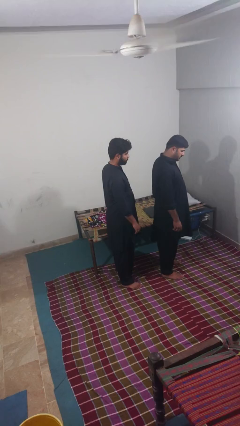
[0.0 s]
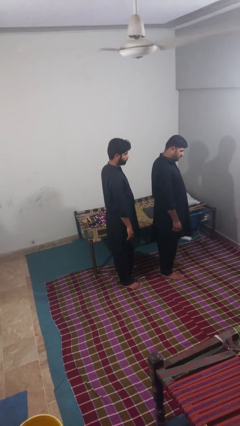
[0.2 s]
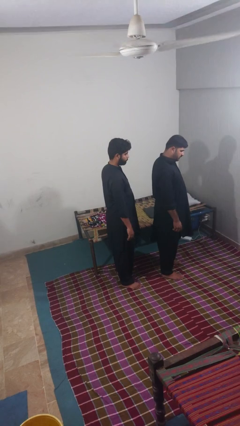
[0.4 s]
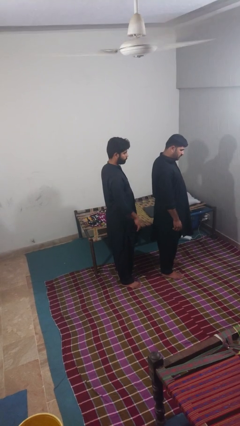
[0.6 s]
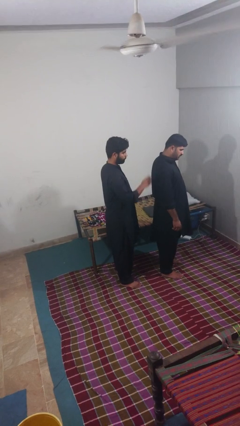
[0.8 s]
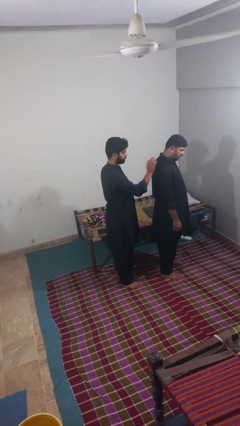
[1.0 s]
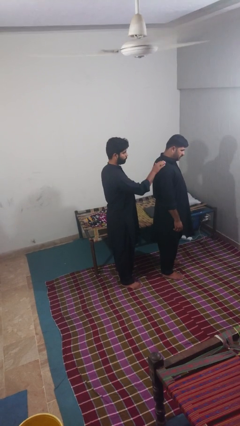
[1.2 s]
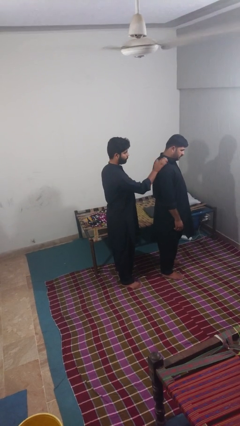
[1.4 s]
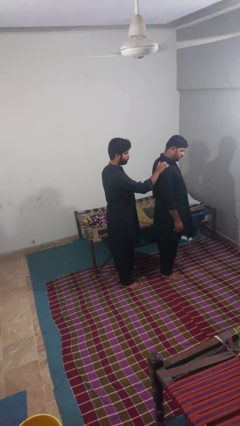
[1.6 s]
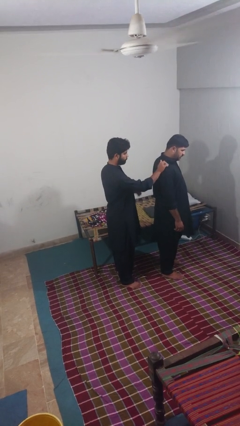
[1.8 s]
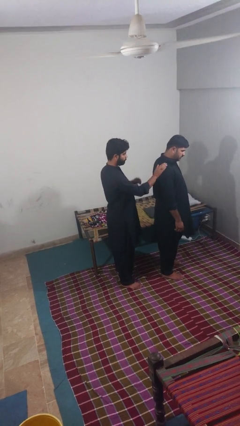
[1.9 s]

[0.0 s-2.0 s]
person touches back of person

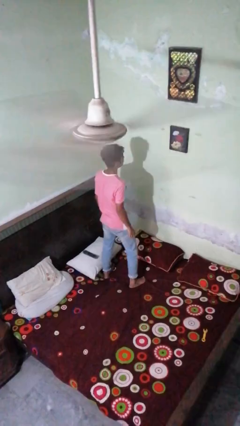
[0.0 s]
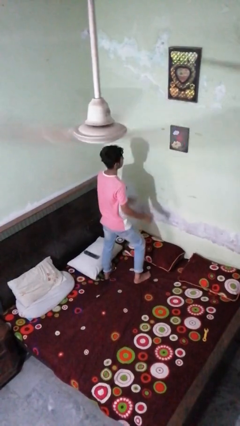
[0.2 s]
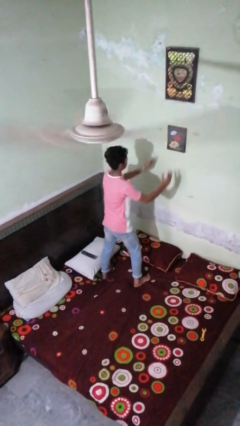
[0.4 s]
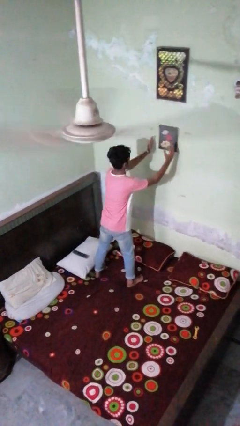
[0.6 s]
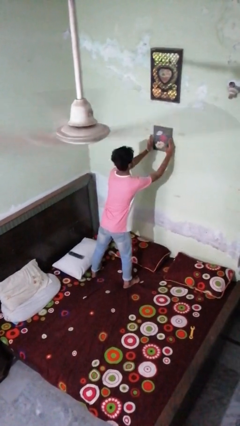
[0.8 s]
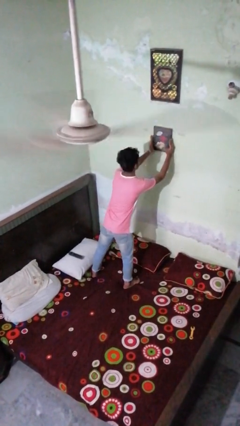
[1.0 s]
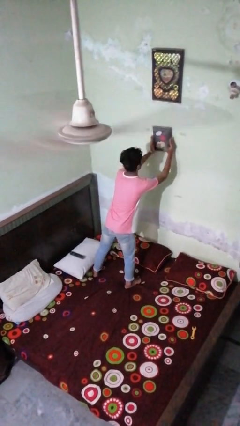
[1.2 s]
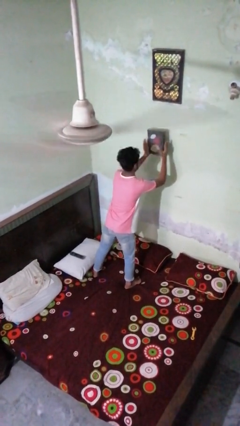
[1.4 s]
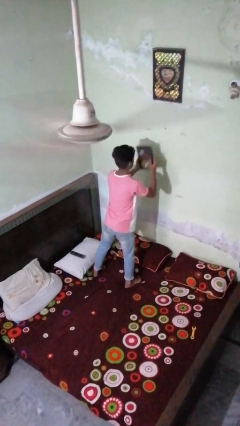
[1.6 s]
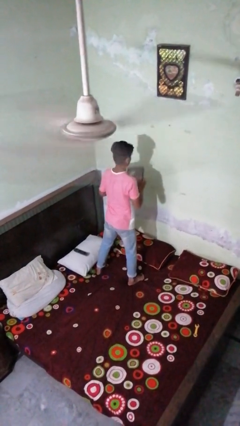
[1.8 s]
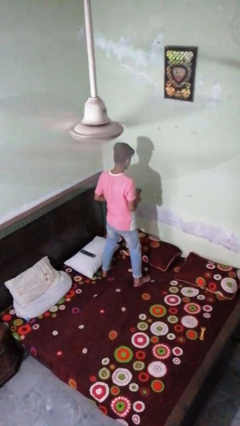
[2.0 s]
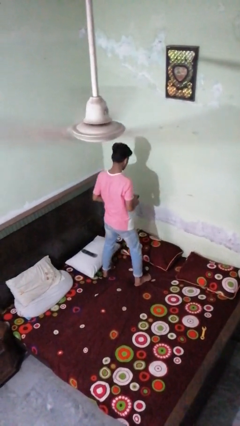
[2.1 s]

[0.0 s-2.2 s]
person takes down picture frame

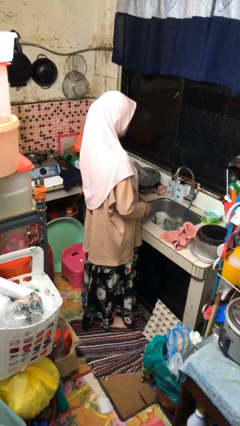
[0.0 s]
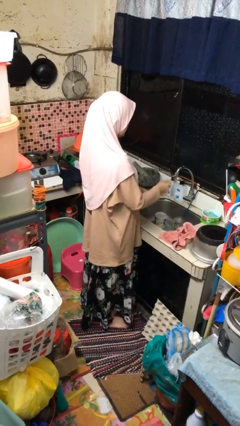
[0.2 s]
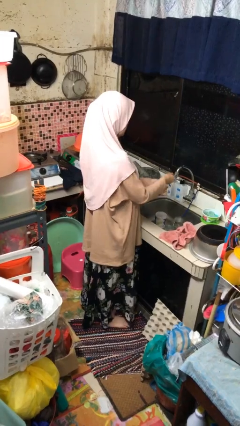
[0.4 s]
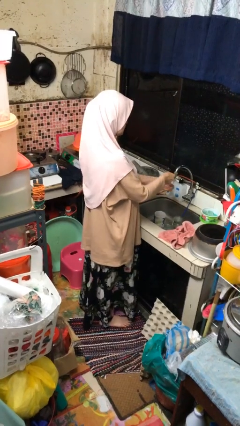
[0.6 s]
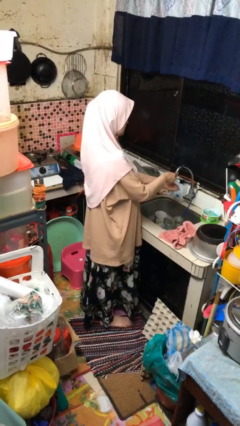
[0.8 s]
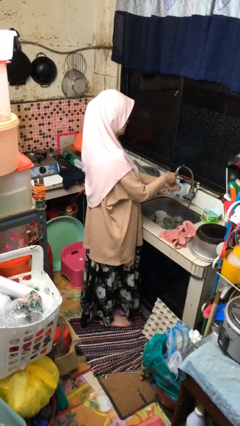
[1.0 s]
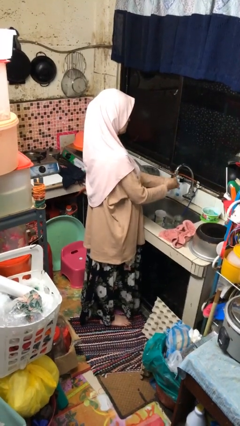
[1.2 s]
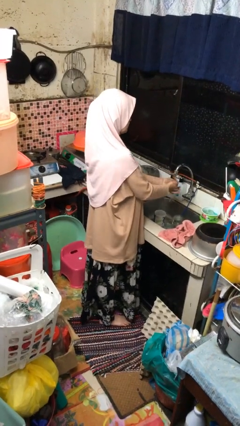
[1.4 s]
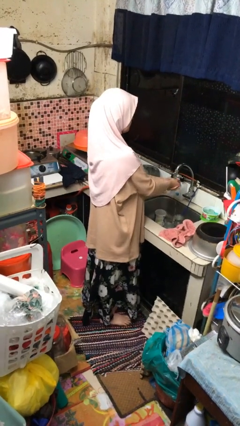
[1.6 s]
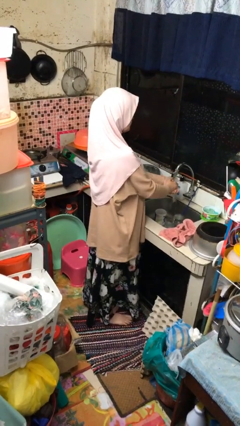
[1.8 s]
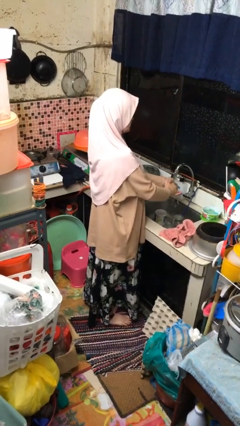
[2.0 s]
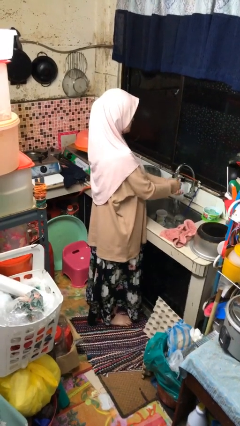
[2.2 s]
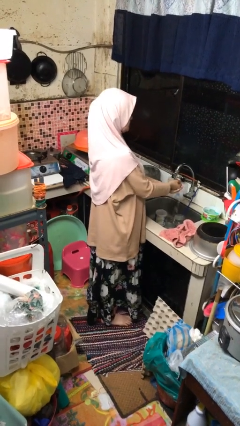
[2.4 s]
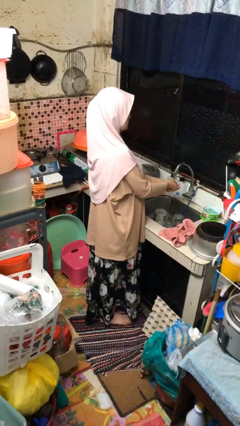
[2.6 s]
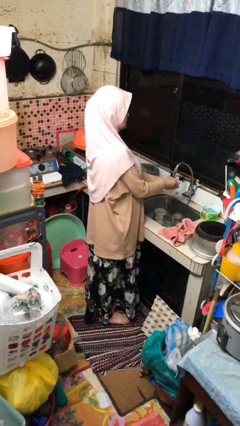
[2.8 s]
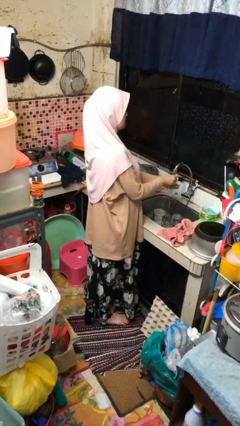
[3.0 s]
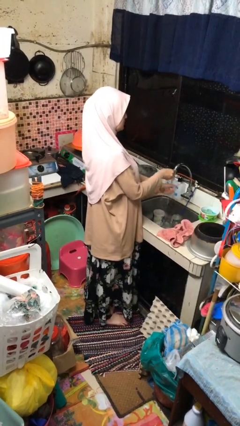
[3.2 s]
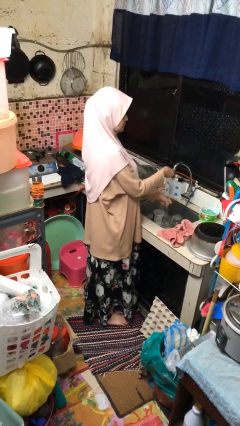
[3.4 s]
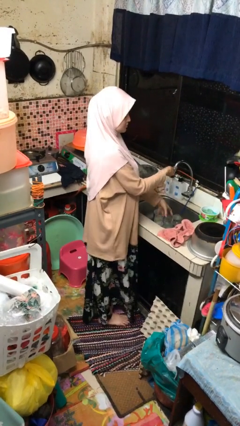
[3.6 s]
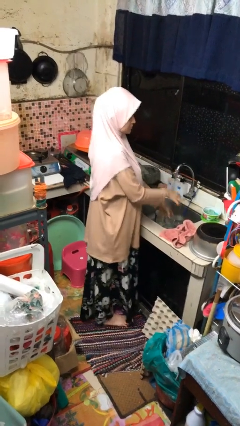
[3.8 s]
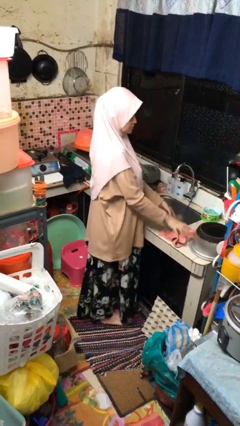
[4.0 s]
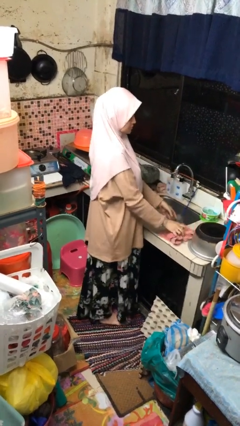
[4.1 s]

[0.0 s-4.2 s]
person washes hands

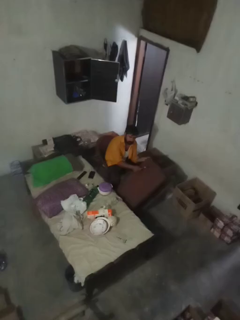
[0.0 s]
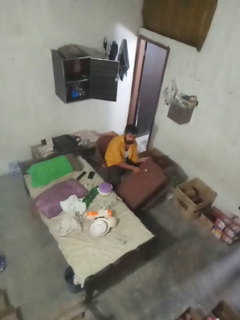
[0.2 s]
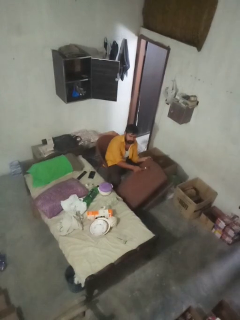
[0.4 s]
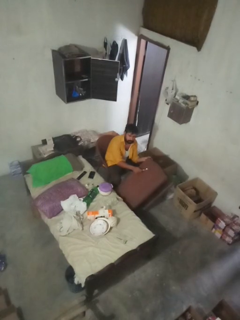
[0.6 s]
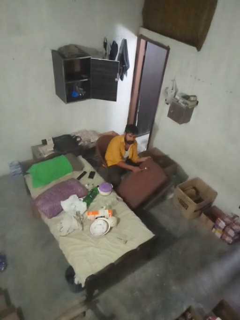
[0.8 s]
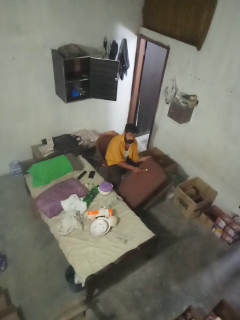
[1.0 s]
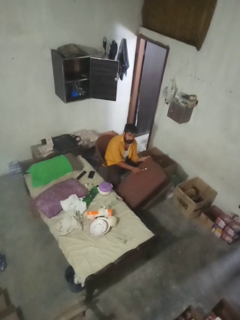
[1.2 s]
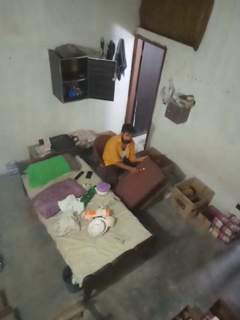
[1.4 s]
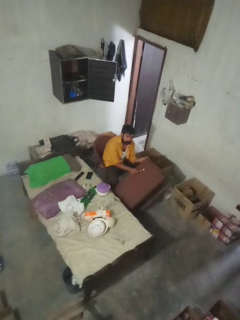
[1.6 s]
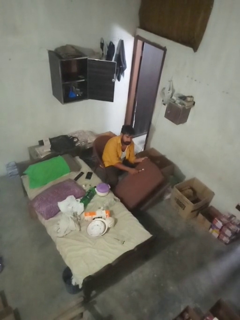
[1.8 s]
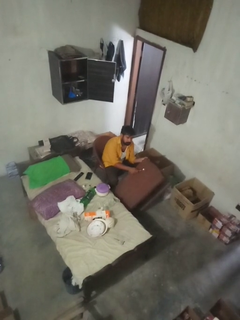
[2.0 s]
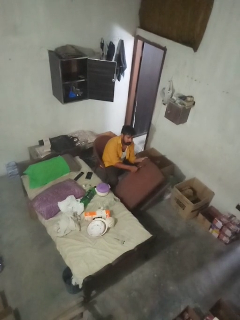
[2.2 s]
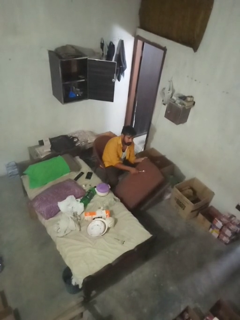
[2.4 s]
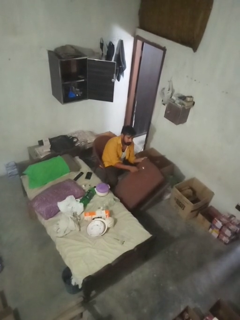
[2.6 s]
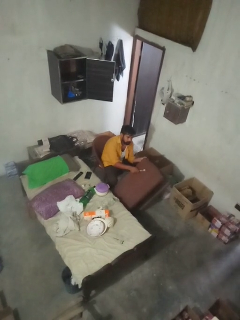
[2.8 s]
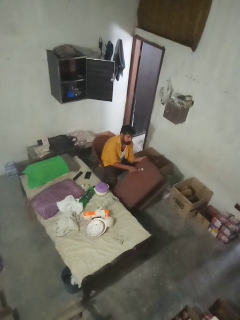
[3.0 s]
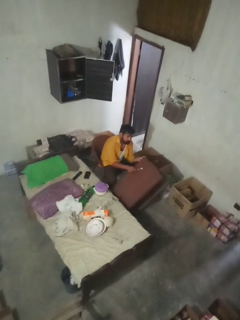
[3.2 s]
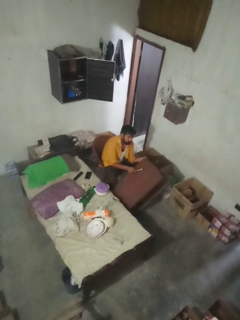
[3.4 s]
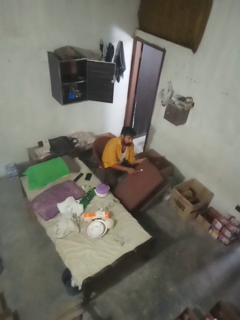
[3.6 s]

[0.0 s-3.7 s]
person knocks over furniture

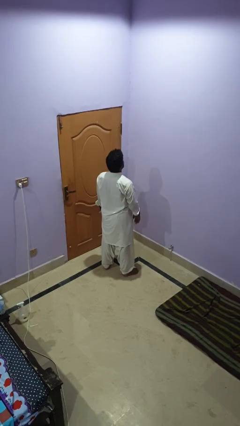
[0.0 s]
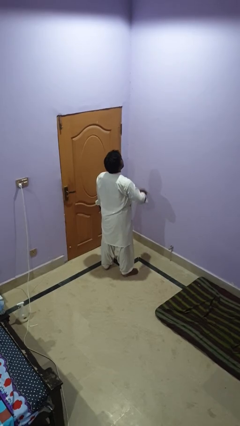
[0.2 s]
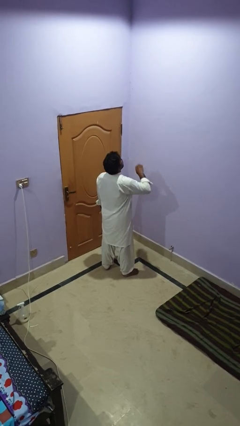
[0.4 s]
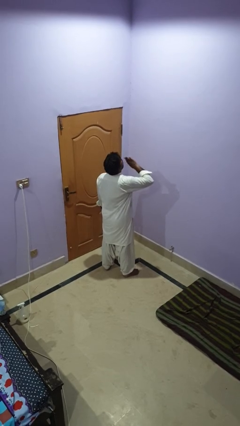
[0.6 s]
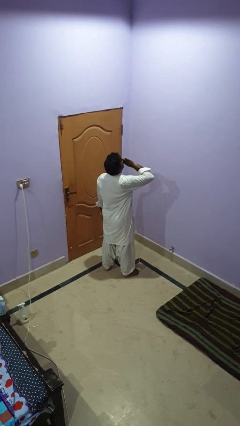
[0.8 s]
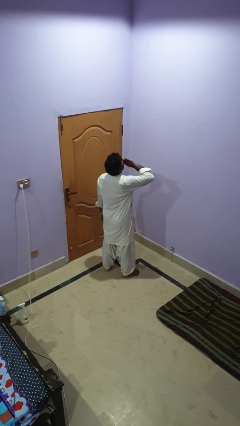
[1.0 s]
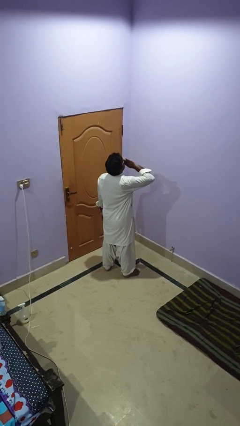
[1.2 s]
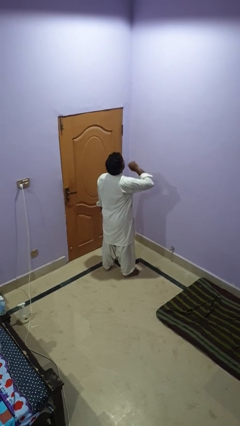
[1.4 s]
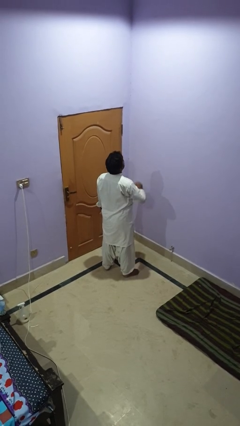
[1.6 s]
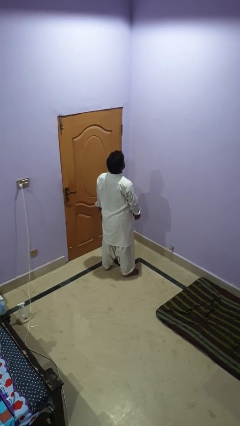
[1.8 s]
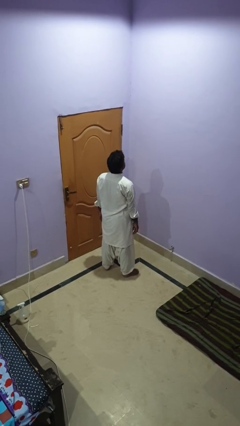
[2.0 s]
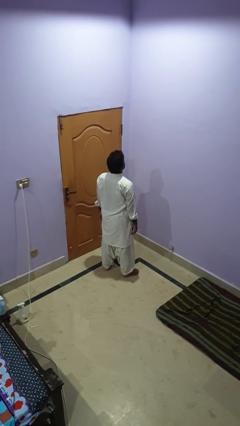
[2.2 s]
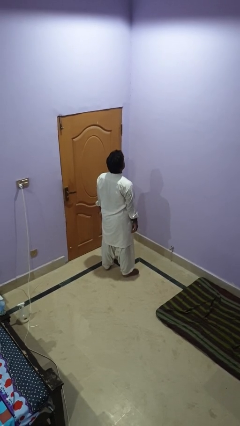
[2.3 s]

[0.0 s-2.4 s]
person yawns

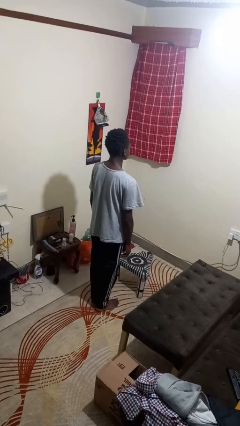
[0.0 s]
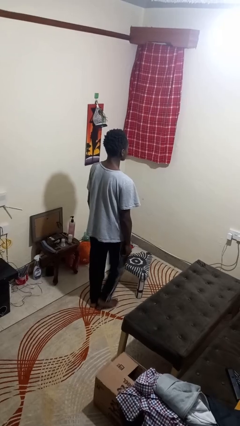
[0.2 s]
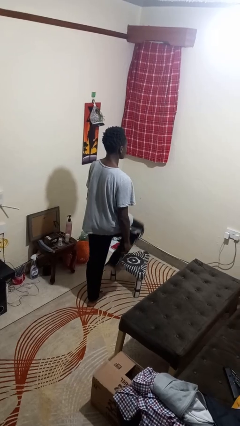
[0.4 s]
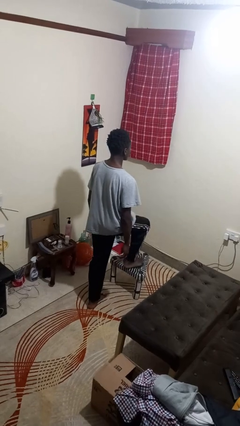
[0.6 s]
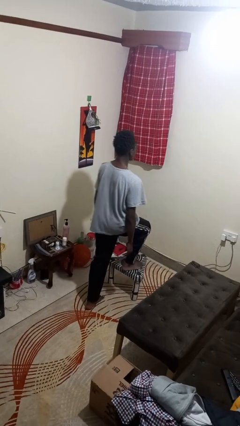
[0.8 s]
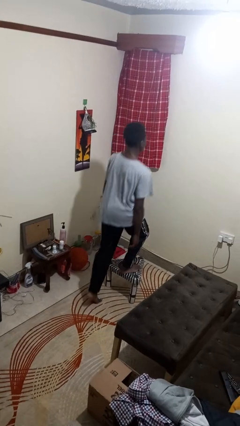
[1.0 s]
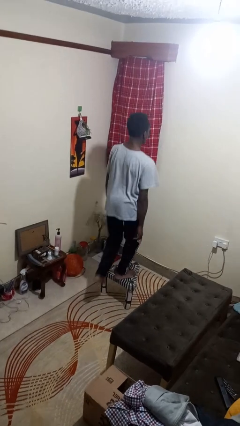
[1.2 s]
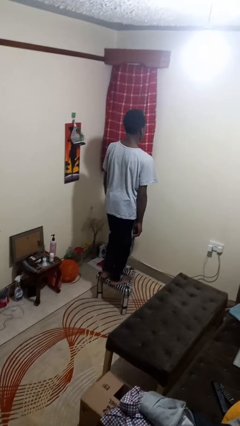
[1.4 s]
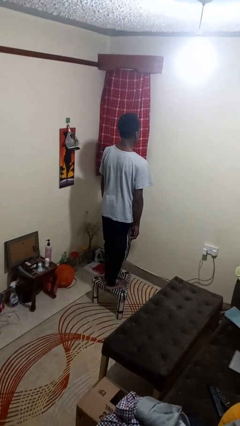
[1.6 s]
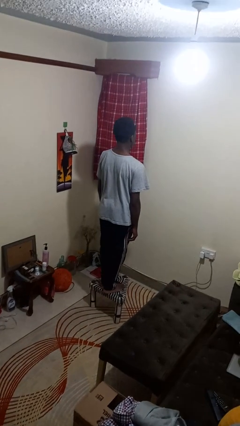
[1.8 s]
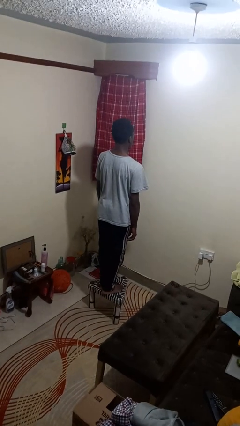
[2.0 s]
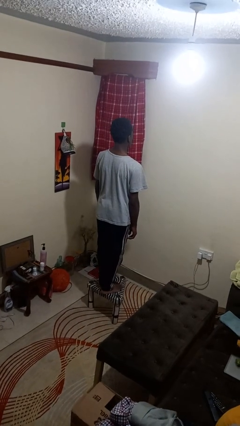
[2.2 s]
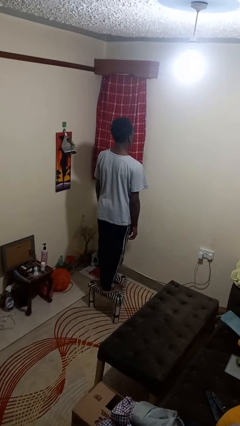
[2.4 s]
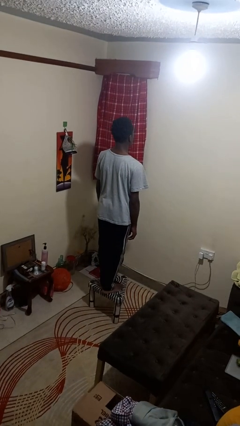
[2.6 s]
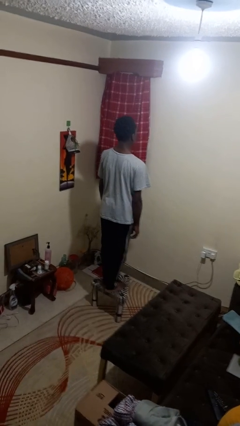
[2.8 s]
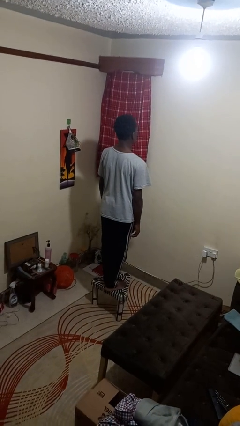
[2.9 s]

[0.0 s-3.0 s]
person climbs on chair

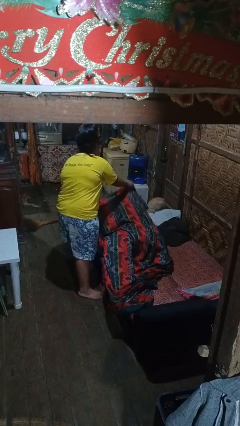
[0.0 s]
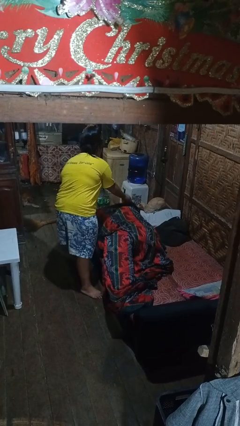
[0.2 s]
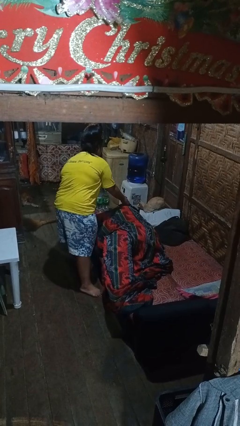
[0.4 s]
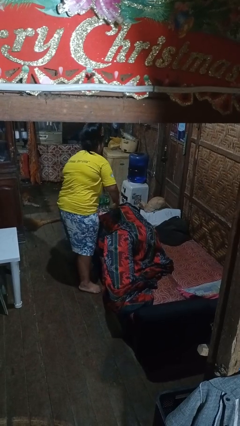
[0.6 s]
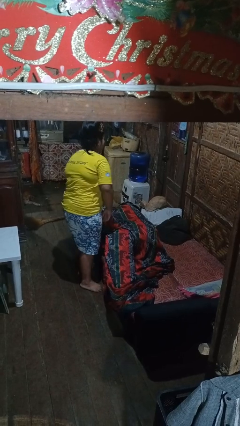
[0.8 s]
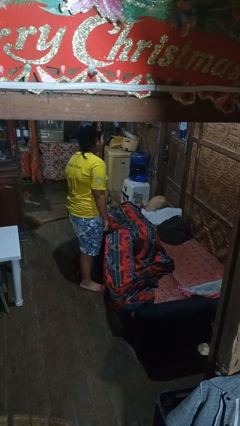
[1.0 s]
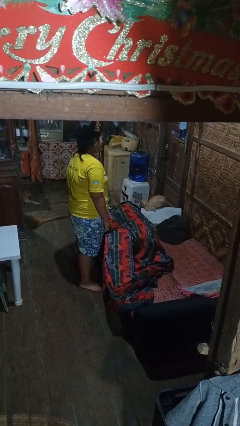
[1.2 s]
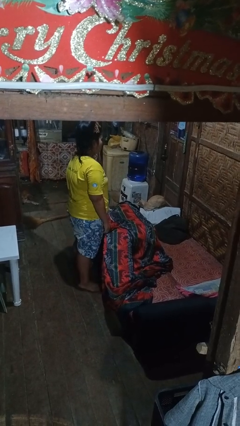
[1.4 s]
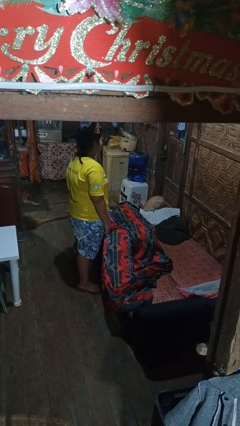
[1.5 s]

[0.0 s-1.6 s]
person covers friend with blanket
